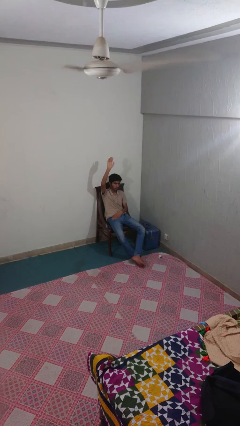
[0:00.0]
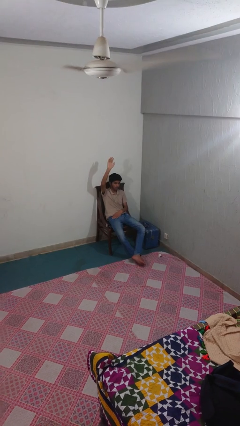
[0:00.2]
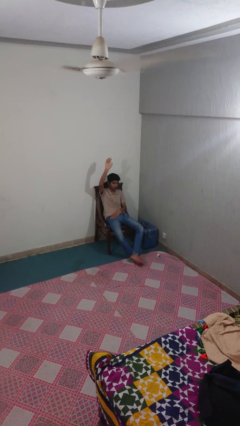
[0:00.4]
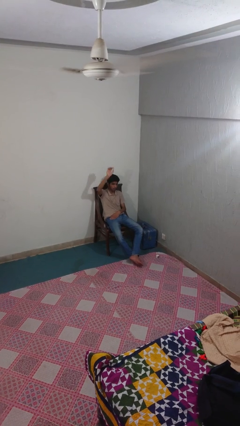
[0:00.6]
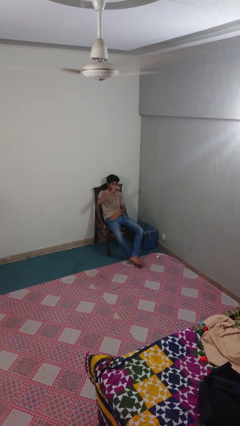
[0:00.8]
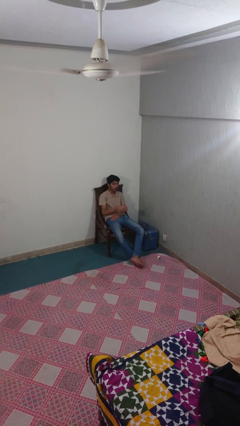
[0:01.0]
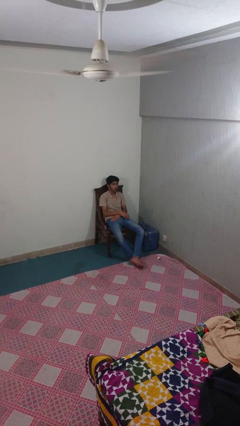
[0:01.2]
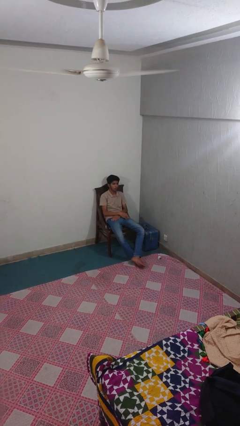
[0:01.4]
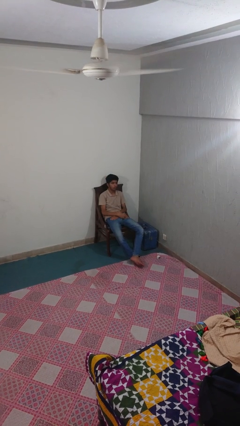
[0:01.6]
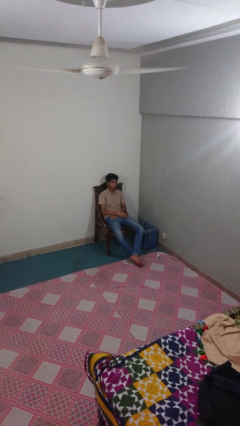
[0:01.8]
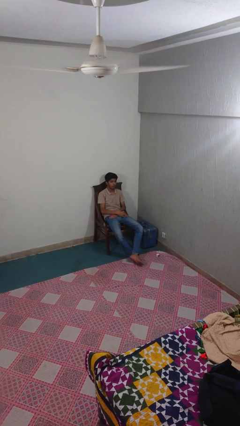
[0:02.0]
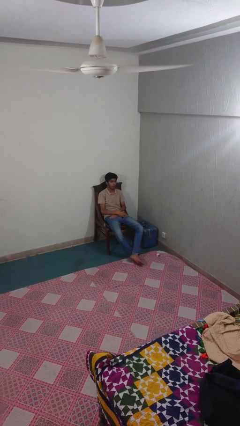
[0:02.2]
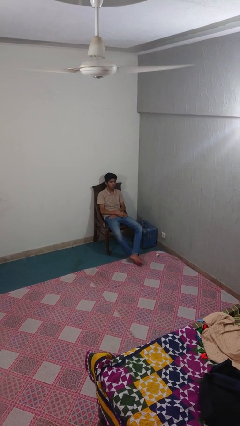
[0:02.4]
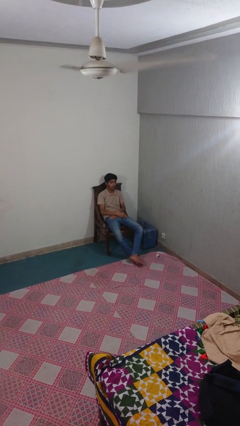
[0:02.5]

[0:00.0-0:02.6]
person gestures lower hand

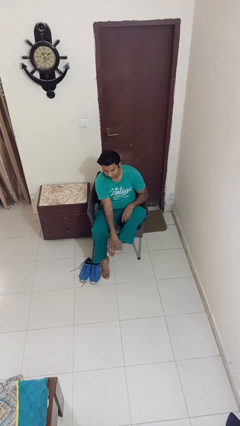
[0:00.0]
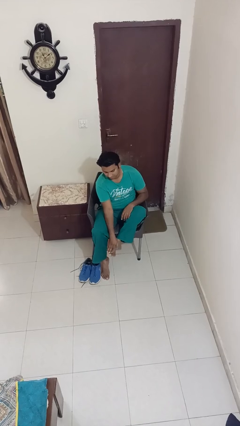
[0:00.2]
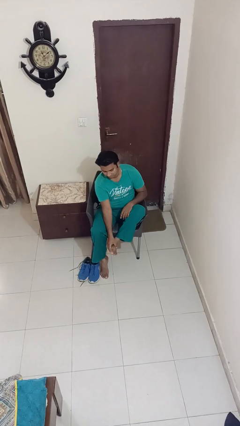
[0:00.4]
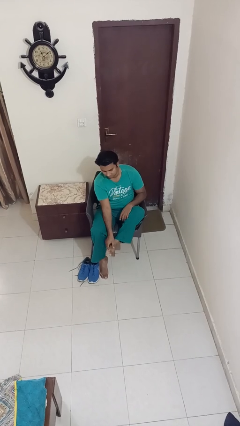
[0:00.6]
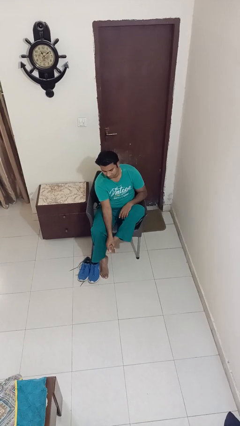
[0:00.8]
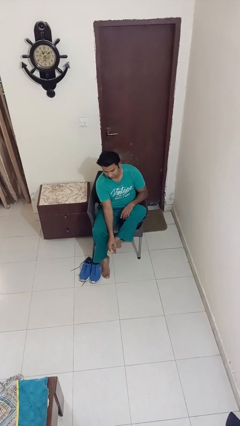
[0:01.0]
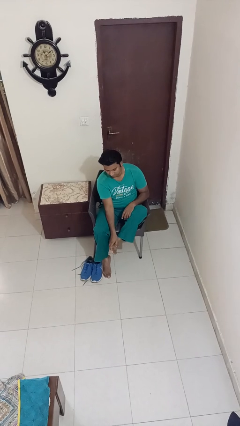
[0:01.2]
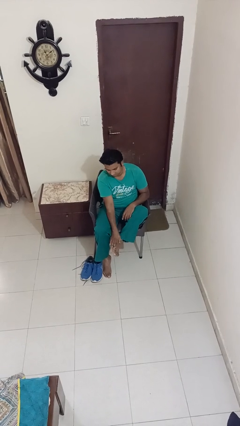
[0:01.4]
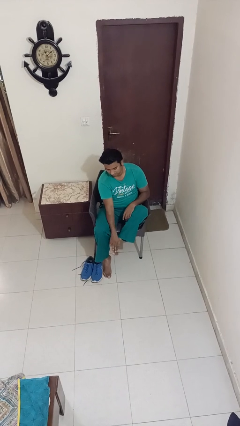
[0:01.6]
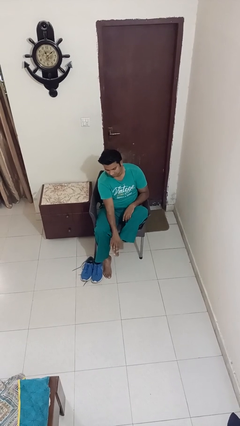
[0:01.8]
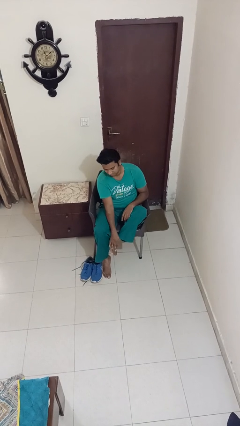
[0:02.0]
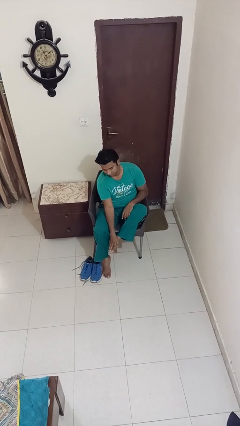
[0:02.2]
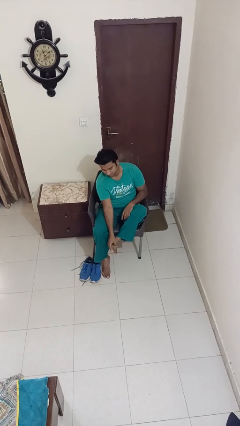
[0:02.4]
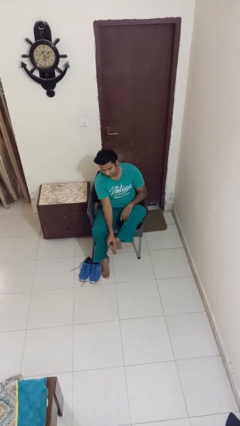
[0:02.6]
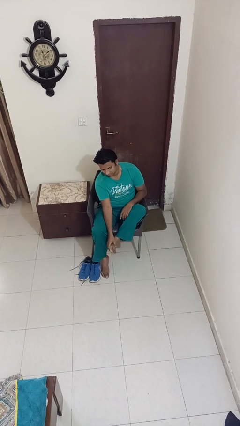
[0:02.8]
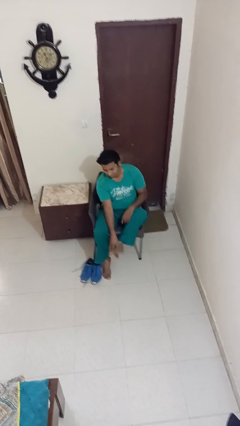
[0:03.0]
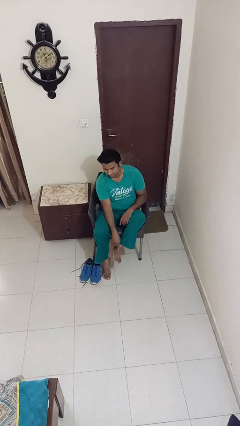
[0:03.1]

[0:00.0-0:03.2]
person rubs foot

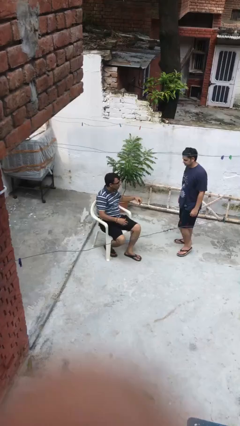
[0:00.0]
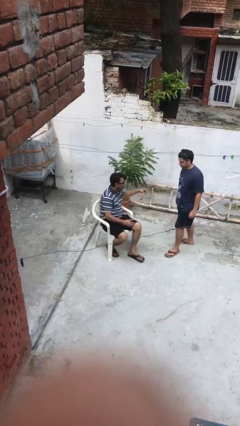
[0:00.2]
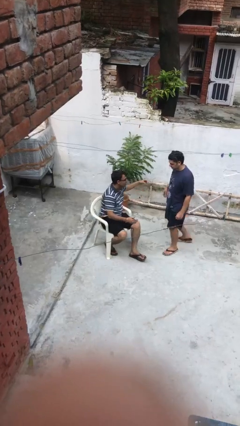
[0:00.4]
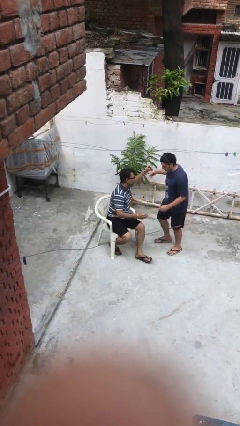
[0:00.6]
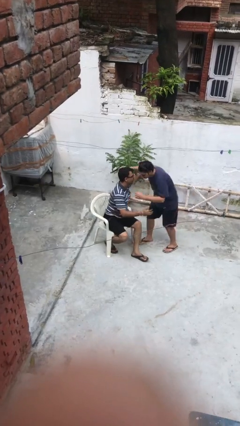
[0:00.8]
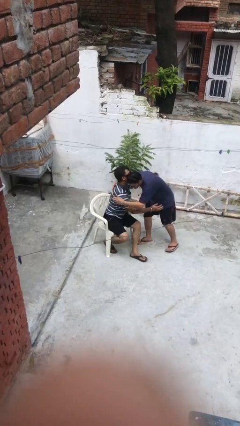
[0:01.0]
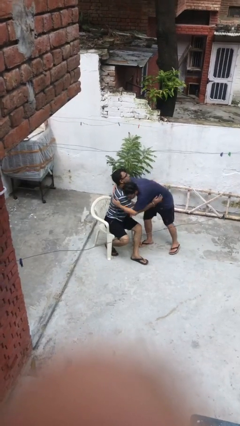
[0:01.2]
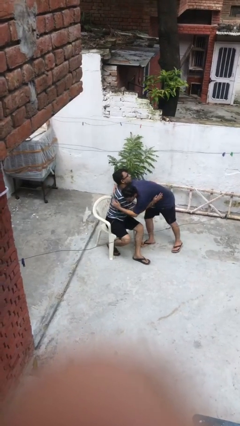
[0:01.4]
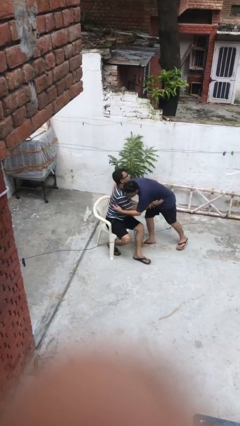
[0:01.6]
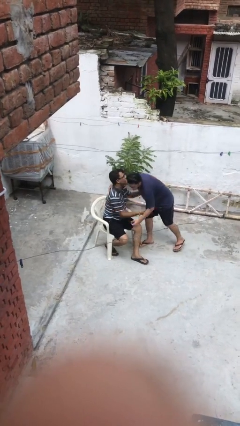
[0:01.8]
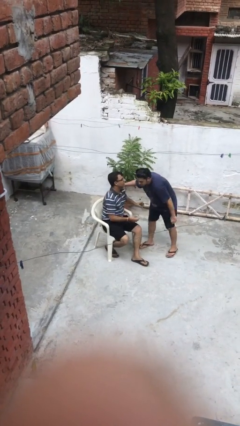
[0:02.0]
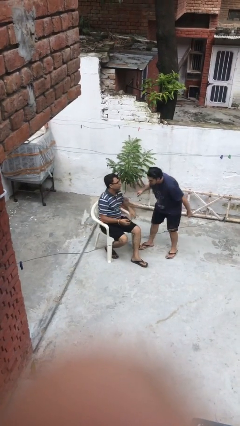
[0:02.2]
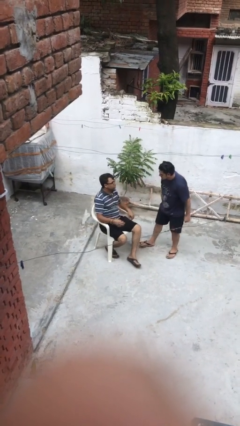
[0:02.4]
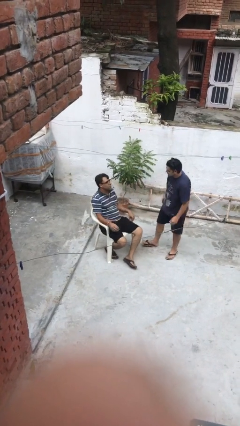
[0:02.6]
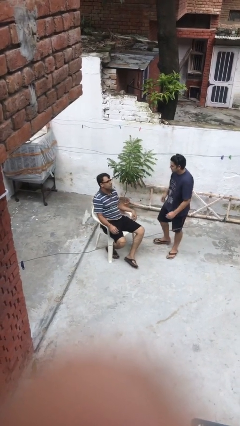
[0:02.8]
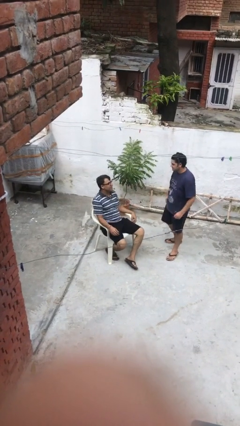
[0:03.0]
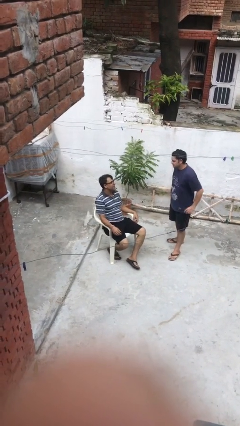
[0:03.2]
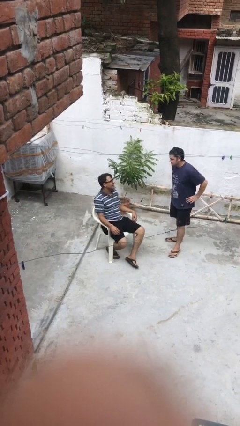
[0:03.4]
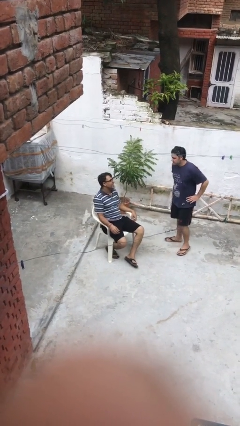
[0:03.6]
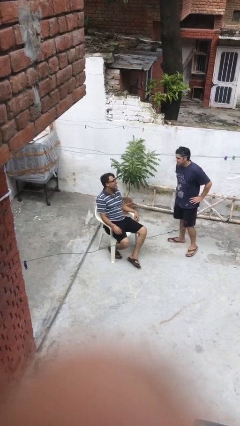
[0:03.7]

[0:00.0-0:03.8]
person embraces person

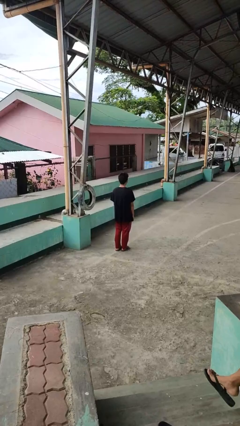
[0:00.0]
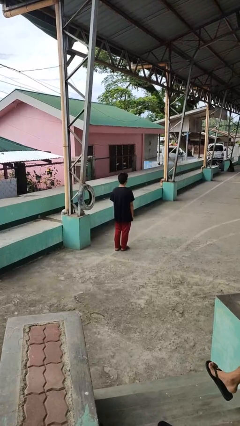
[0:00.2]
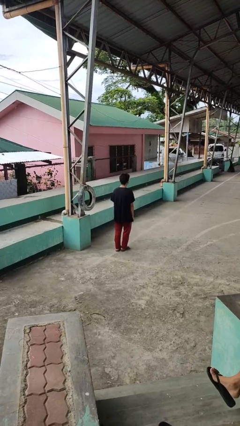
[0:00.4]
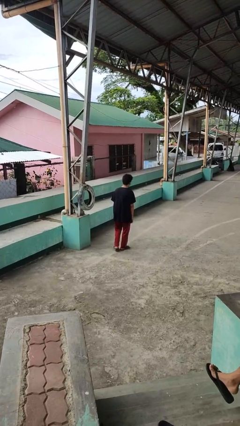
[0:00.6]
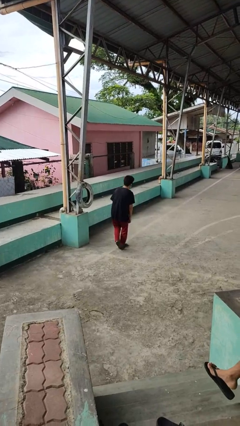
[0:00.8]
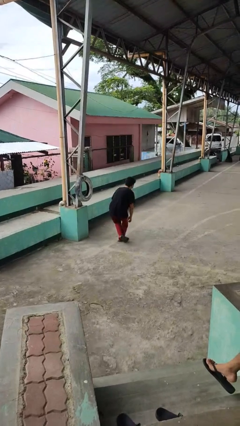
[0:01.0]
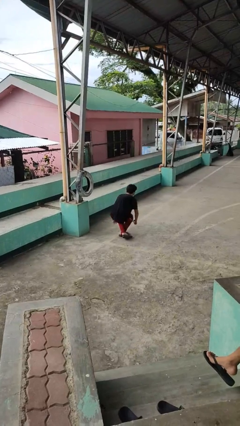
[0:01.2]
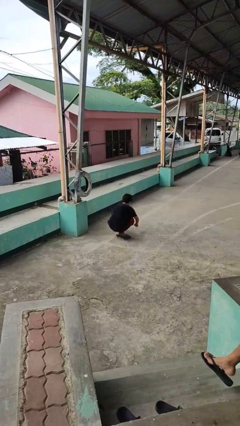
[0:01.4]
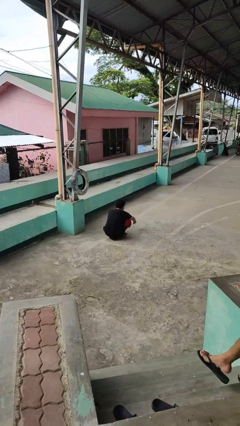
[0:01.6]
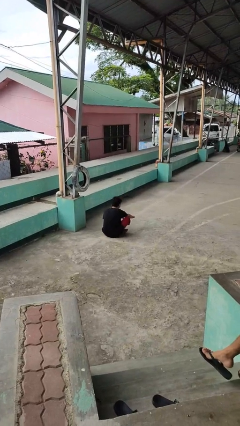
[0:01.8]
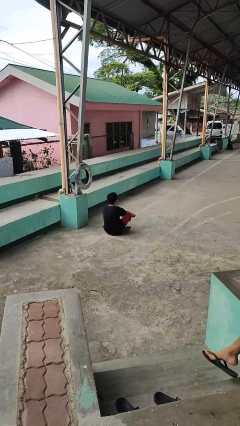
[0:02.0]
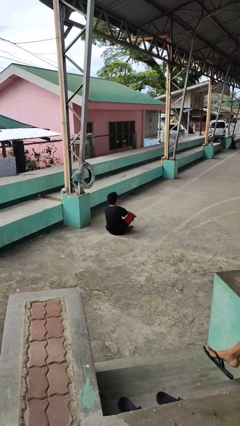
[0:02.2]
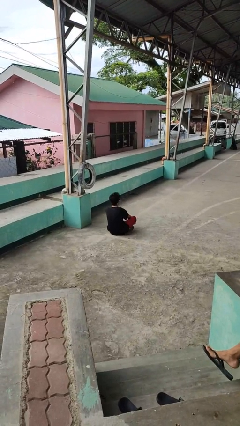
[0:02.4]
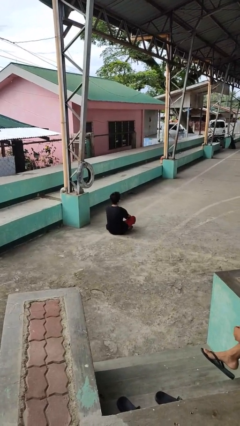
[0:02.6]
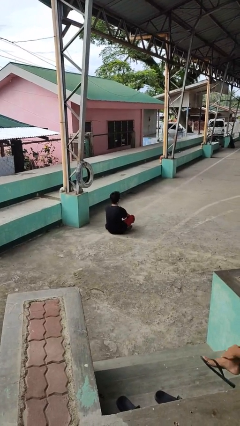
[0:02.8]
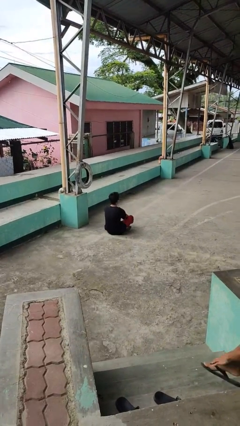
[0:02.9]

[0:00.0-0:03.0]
person sits crisscross

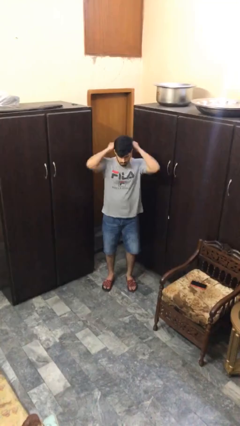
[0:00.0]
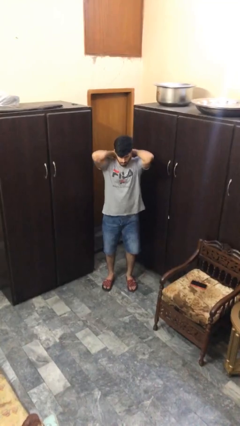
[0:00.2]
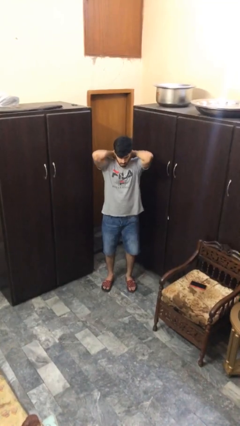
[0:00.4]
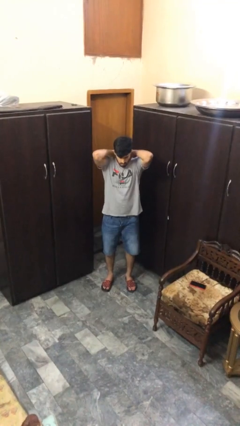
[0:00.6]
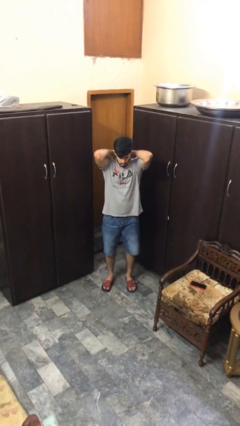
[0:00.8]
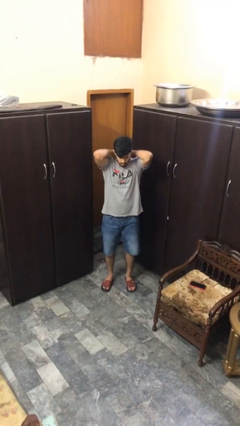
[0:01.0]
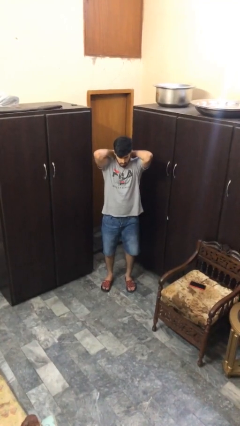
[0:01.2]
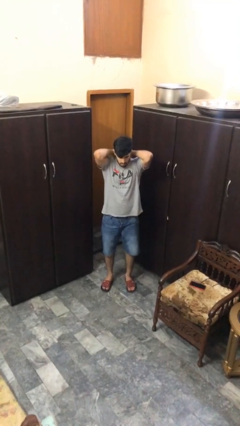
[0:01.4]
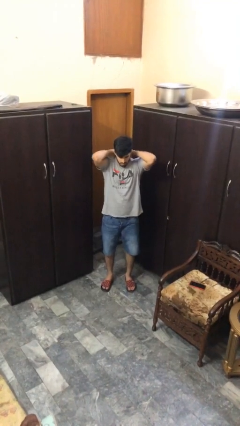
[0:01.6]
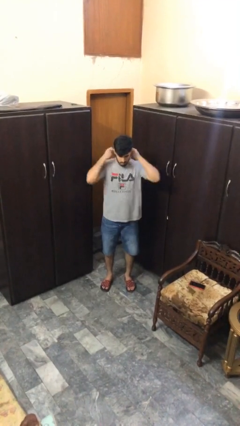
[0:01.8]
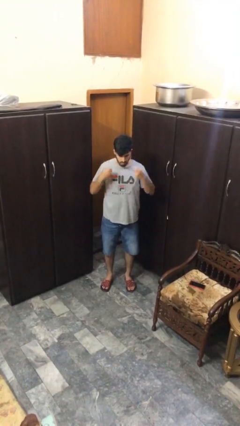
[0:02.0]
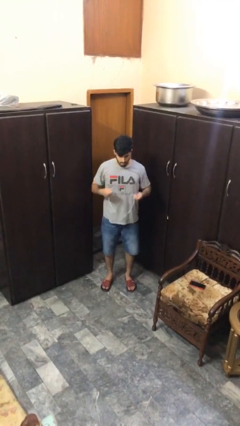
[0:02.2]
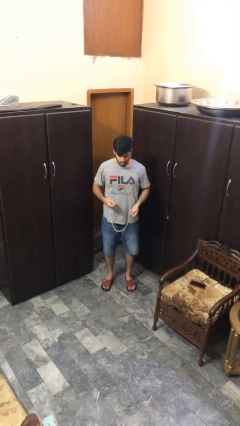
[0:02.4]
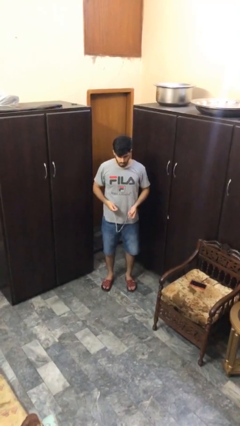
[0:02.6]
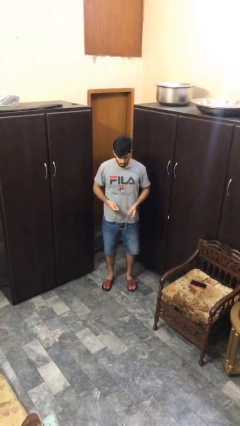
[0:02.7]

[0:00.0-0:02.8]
person takes off necklace

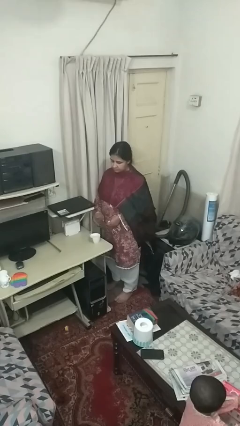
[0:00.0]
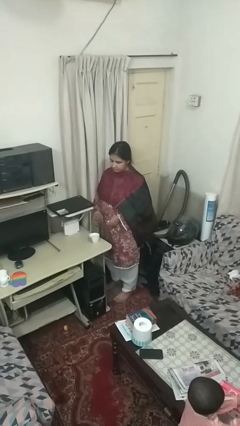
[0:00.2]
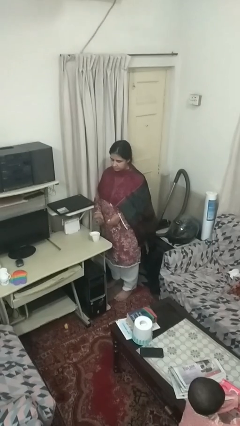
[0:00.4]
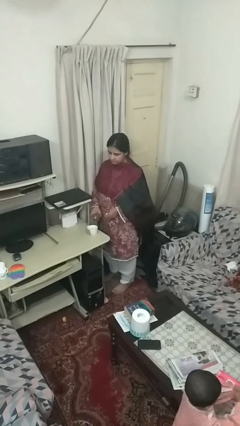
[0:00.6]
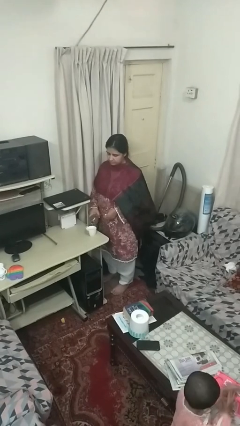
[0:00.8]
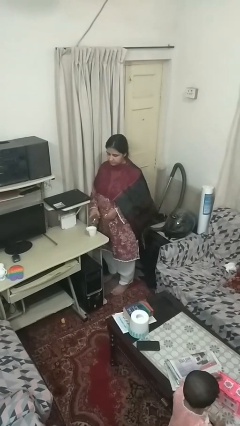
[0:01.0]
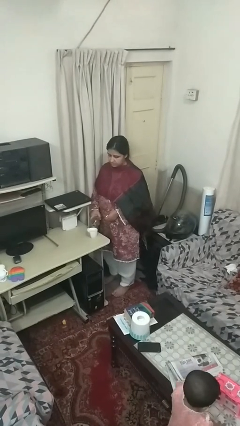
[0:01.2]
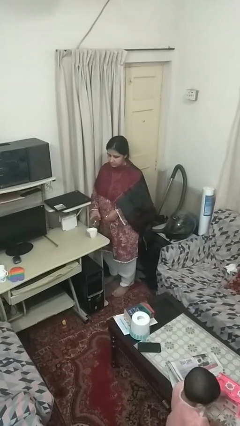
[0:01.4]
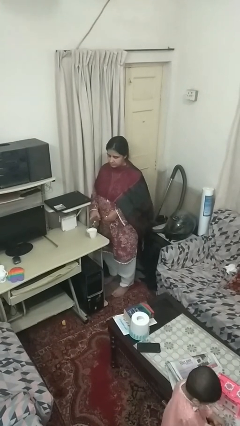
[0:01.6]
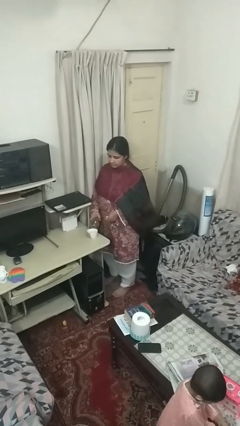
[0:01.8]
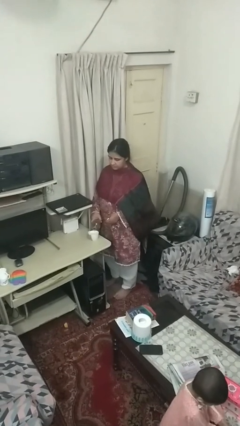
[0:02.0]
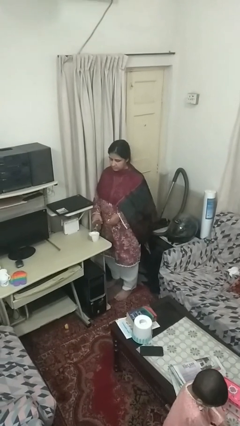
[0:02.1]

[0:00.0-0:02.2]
person pours liquid into cup
